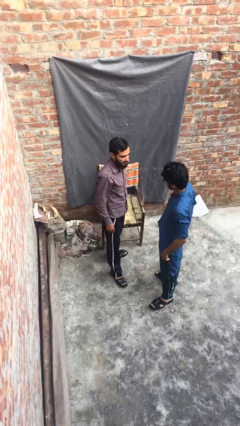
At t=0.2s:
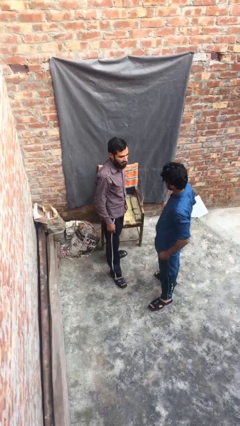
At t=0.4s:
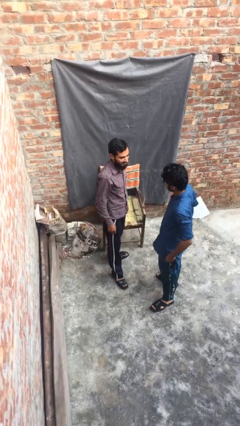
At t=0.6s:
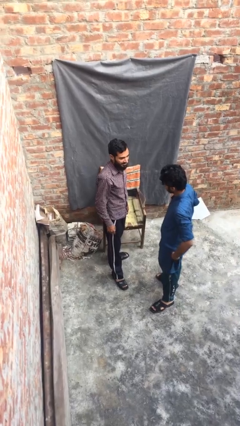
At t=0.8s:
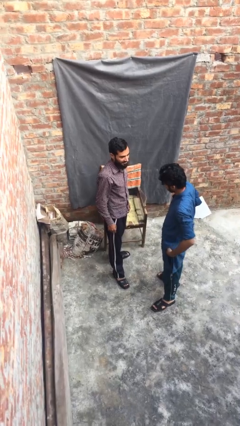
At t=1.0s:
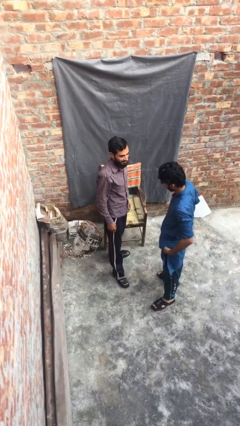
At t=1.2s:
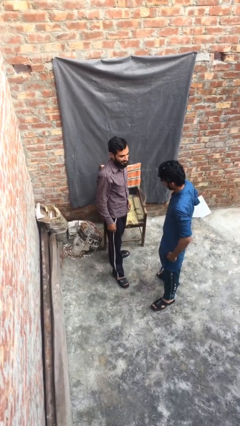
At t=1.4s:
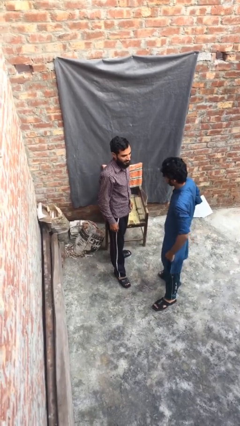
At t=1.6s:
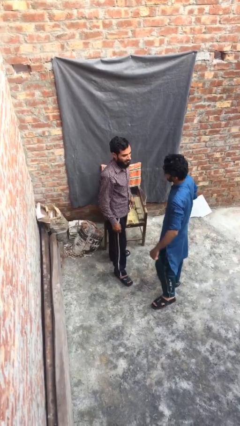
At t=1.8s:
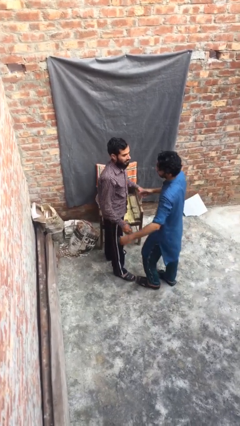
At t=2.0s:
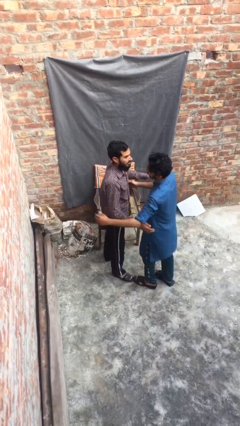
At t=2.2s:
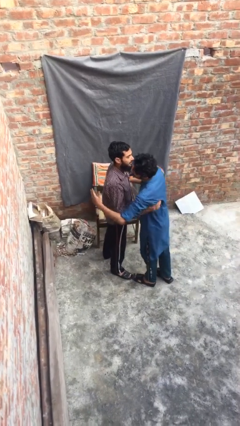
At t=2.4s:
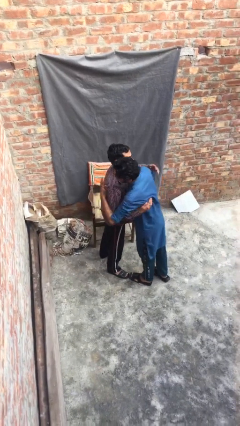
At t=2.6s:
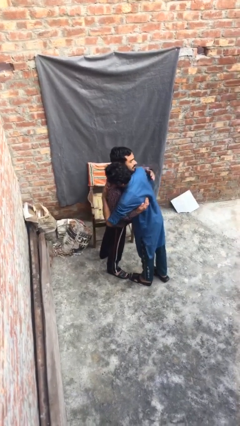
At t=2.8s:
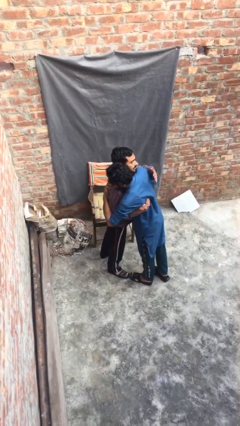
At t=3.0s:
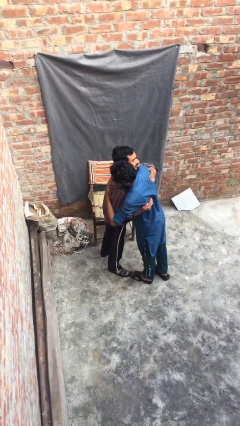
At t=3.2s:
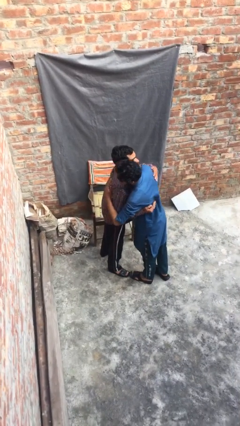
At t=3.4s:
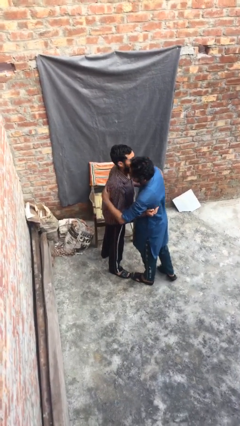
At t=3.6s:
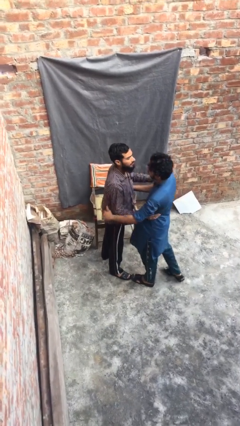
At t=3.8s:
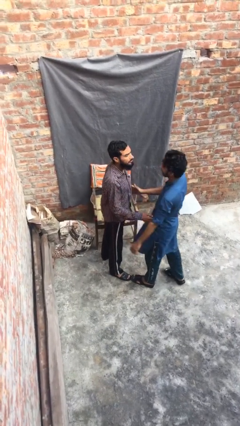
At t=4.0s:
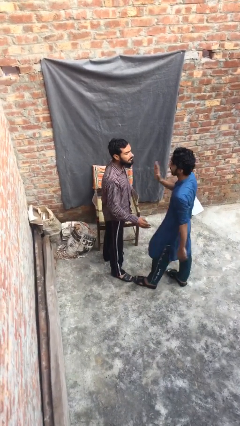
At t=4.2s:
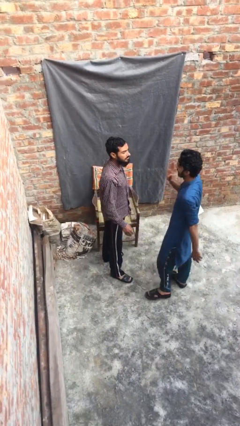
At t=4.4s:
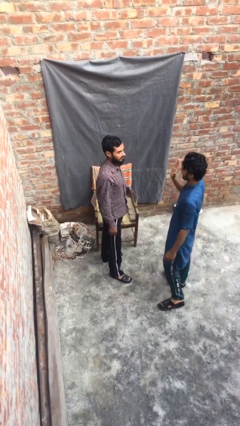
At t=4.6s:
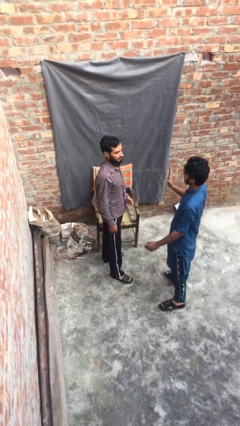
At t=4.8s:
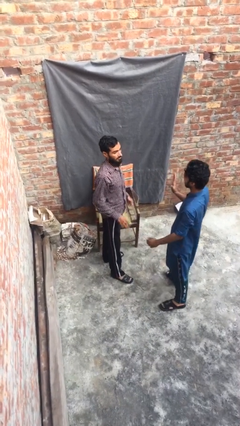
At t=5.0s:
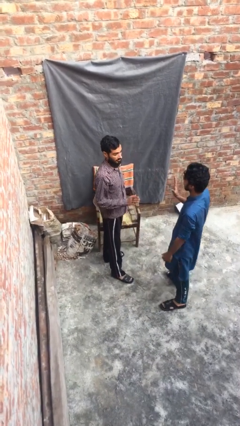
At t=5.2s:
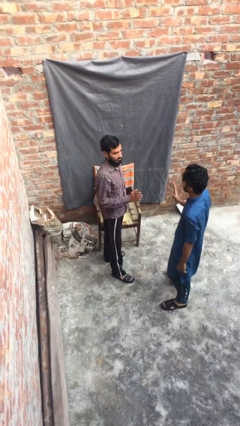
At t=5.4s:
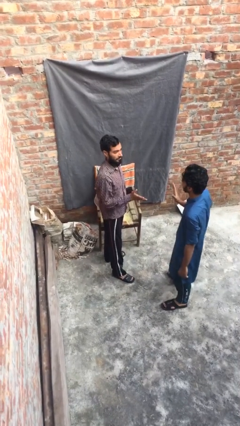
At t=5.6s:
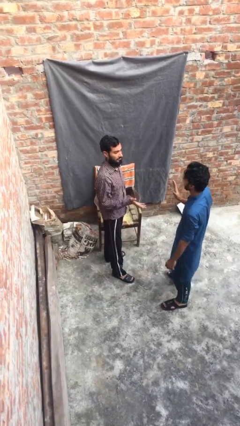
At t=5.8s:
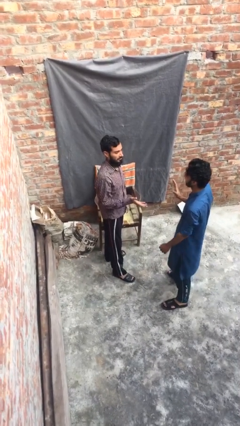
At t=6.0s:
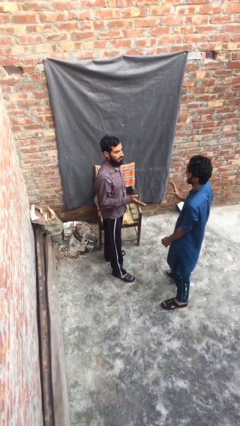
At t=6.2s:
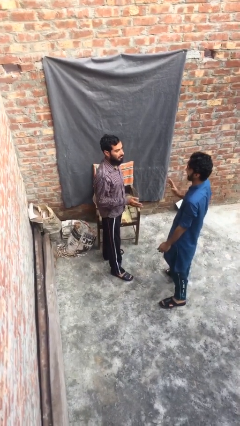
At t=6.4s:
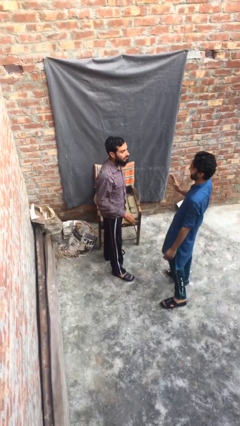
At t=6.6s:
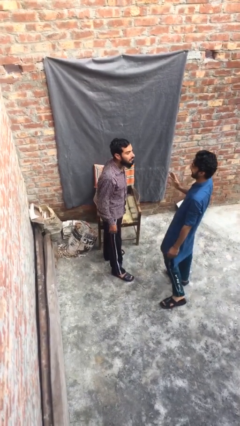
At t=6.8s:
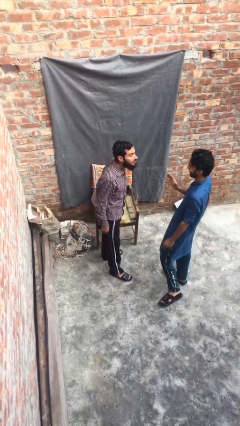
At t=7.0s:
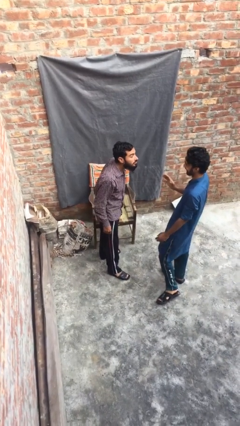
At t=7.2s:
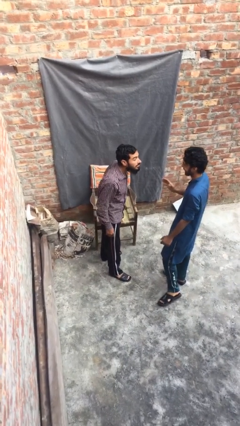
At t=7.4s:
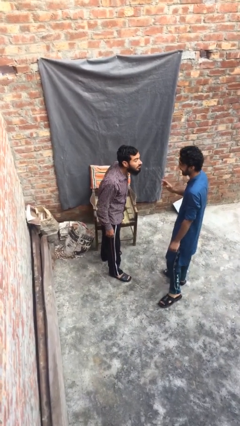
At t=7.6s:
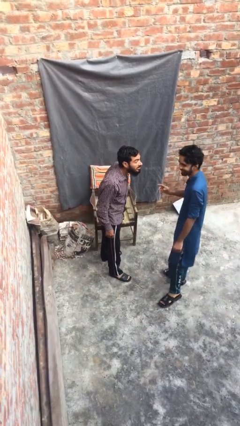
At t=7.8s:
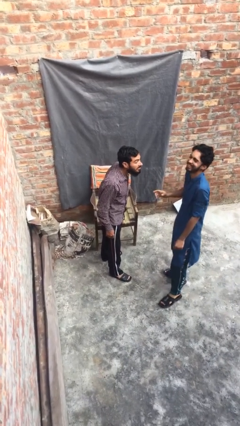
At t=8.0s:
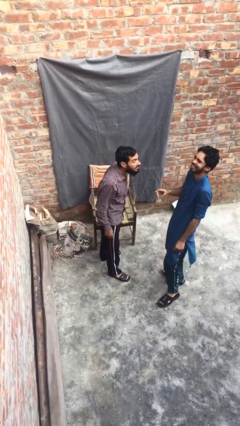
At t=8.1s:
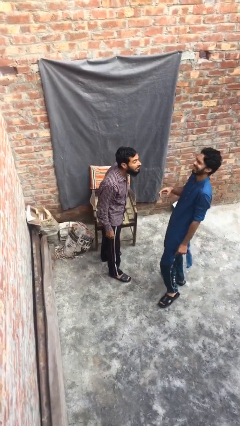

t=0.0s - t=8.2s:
person embraces person

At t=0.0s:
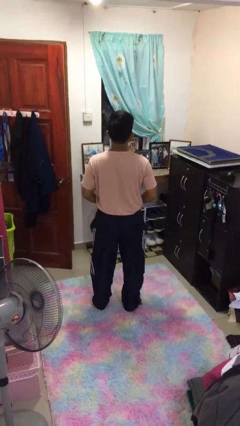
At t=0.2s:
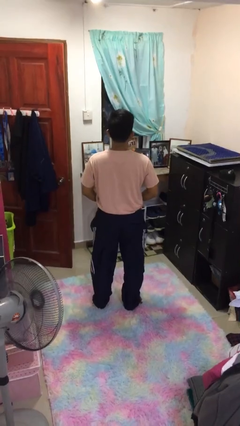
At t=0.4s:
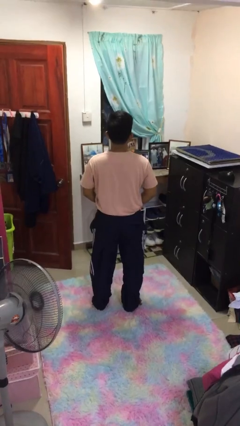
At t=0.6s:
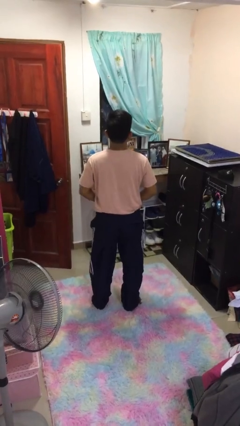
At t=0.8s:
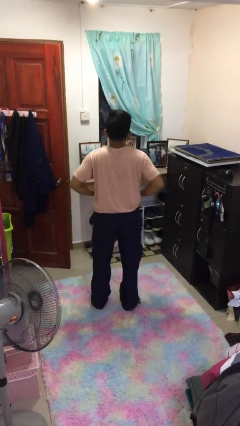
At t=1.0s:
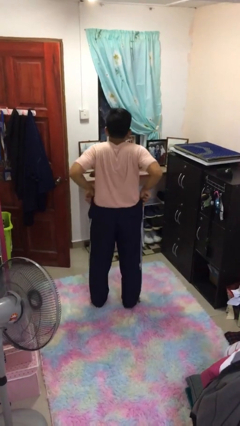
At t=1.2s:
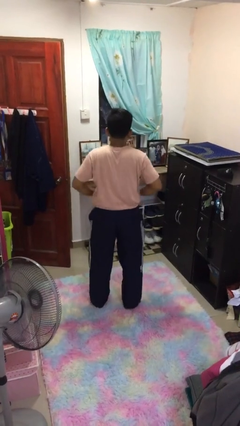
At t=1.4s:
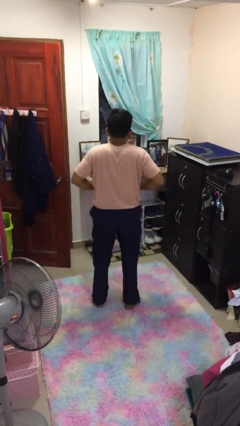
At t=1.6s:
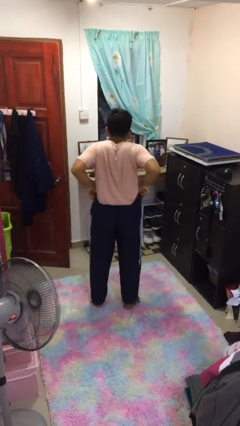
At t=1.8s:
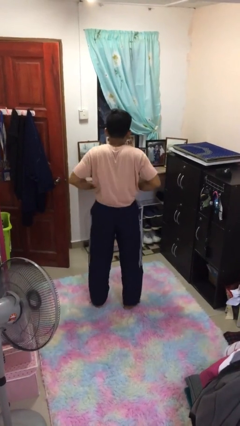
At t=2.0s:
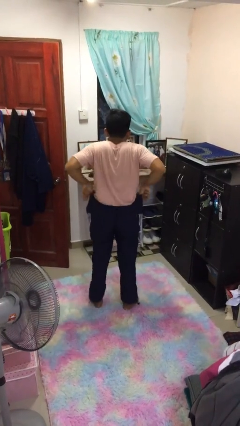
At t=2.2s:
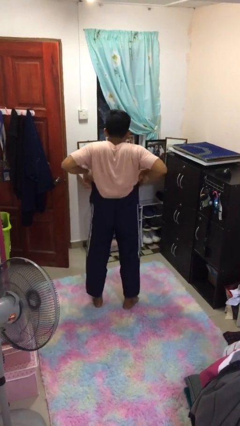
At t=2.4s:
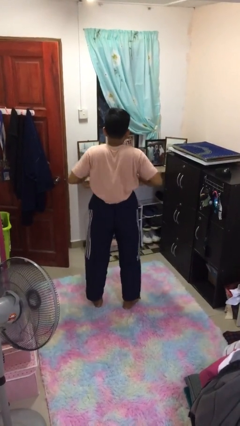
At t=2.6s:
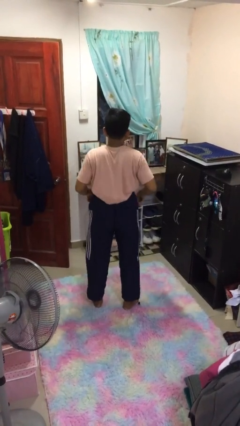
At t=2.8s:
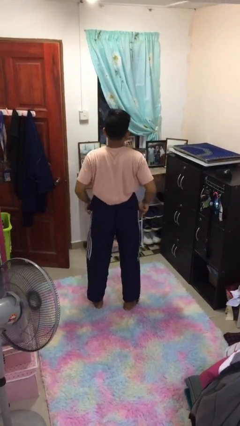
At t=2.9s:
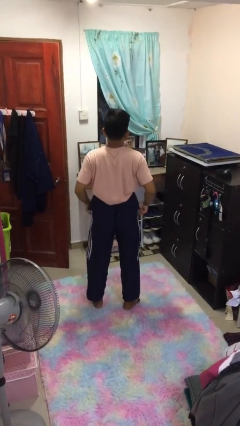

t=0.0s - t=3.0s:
person hikes up pants

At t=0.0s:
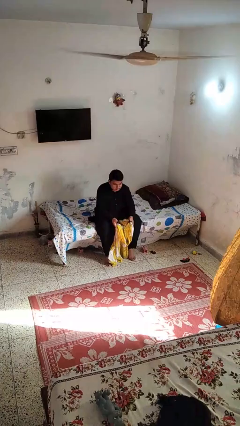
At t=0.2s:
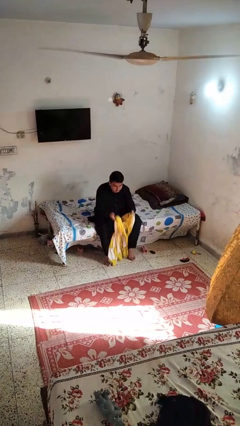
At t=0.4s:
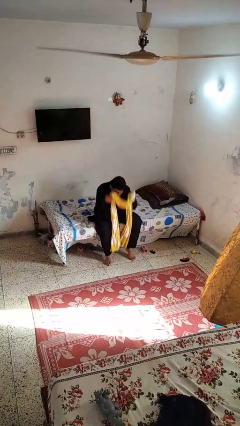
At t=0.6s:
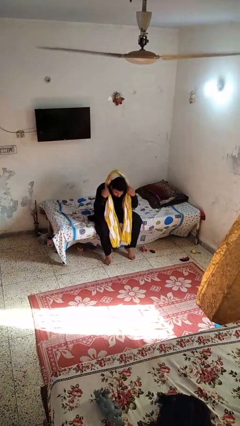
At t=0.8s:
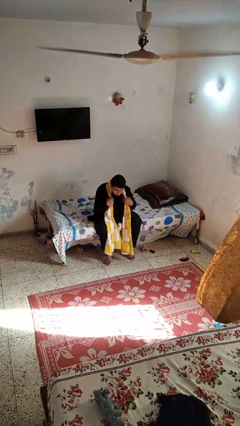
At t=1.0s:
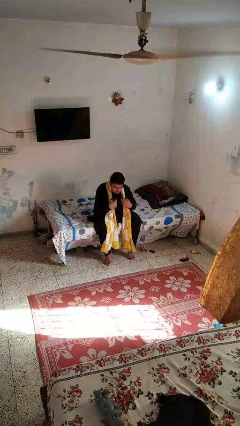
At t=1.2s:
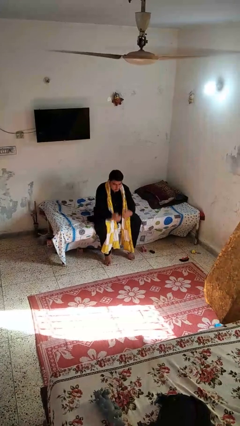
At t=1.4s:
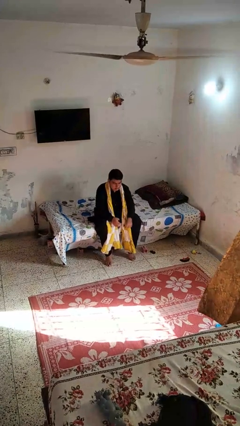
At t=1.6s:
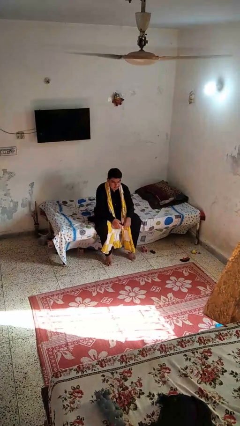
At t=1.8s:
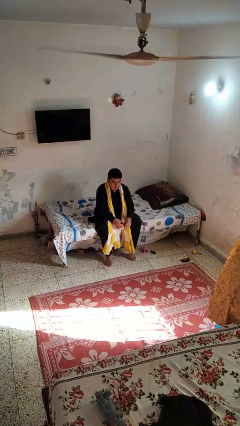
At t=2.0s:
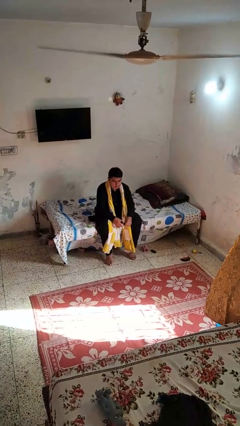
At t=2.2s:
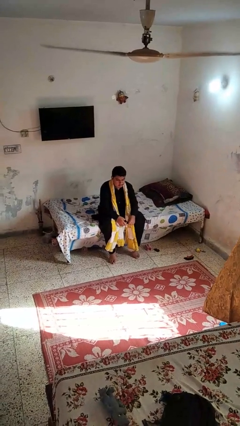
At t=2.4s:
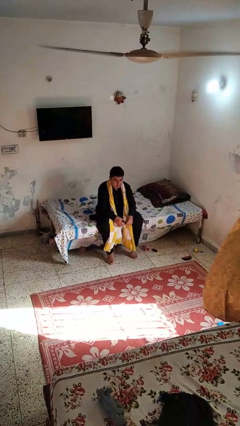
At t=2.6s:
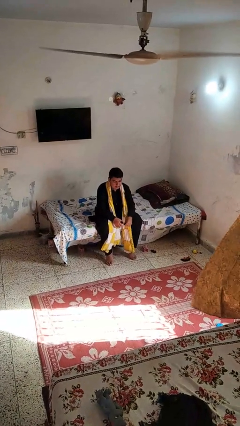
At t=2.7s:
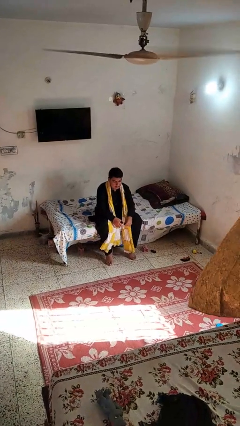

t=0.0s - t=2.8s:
person puts on scarf

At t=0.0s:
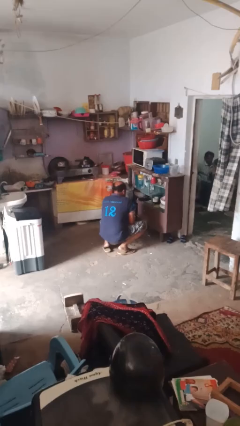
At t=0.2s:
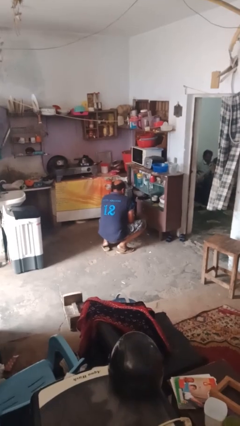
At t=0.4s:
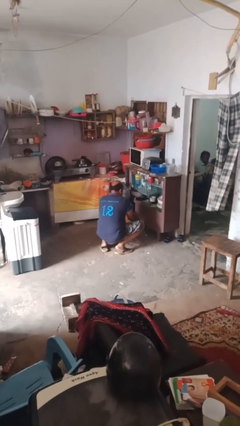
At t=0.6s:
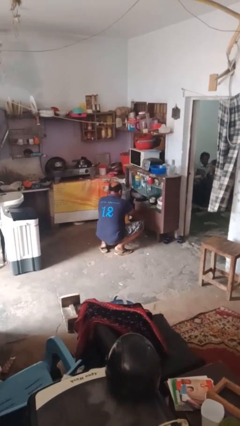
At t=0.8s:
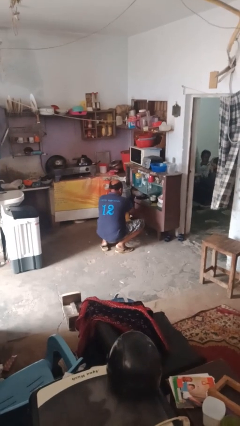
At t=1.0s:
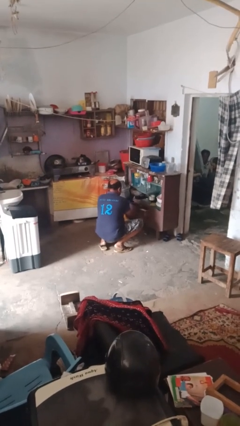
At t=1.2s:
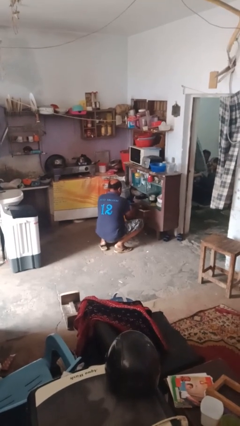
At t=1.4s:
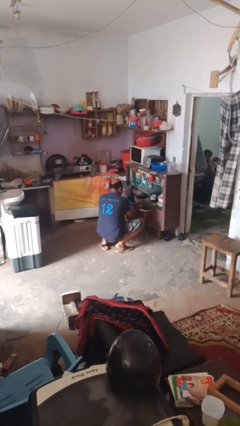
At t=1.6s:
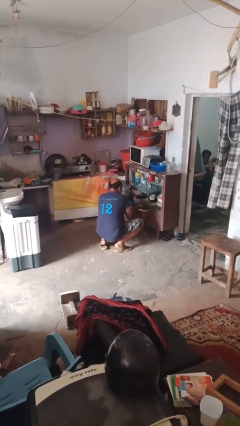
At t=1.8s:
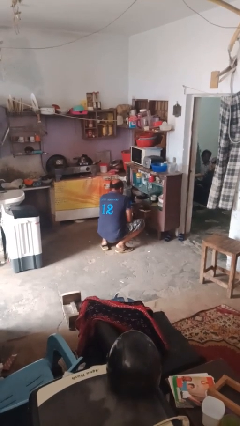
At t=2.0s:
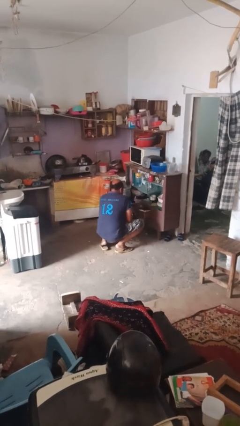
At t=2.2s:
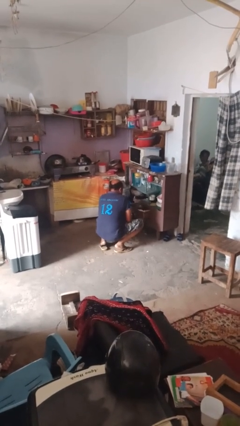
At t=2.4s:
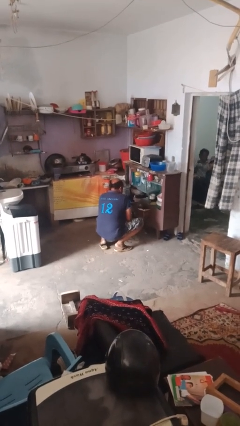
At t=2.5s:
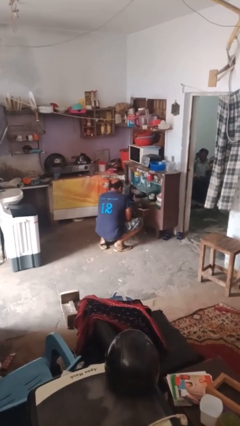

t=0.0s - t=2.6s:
person opens kitchen drawer

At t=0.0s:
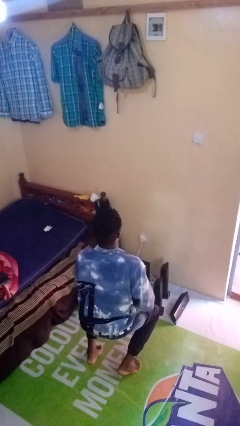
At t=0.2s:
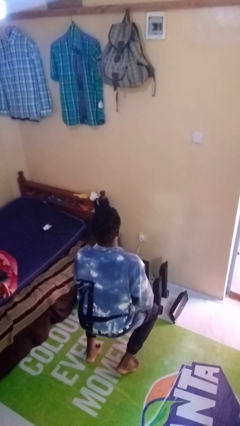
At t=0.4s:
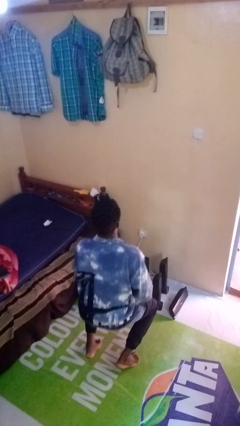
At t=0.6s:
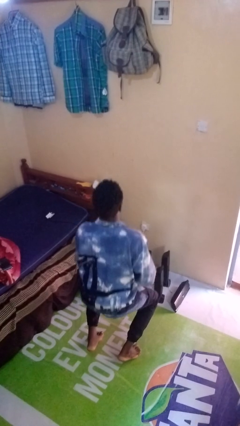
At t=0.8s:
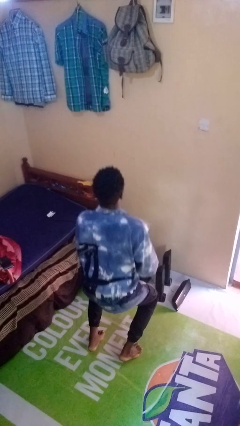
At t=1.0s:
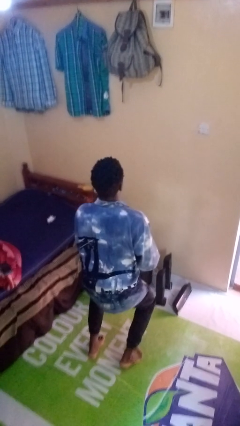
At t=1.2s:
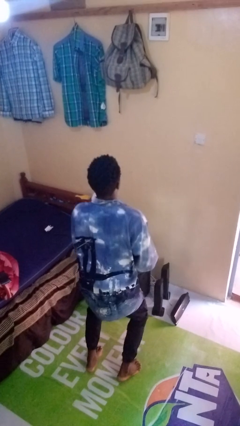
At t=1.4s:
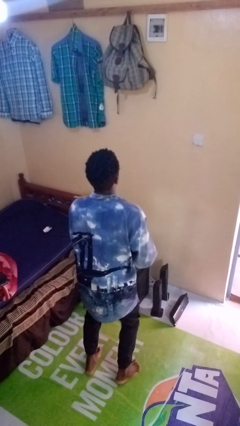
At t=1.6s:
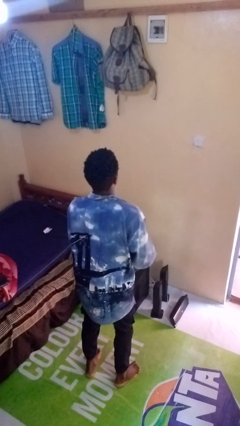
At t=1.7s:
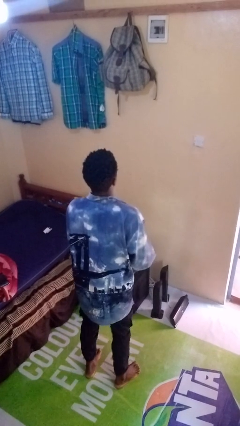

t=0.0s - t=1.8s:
person stands up
